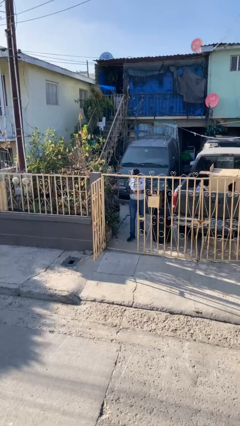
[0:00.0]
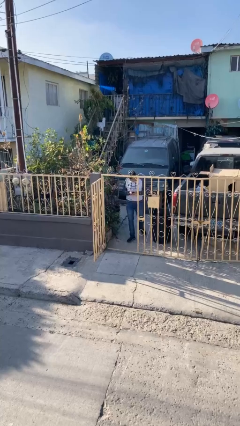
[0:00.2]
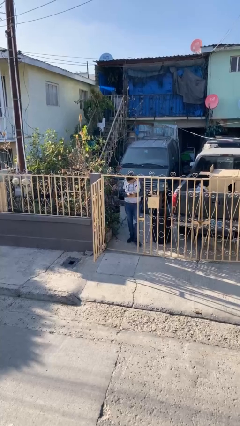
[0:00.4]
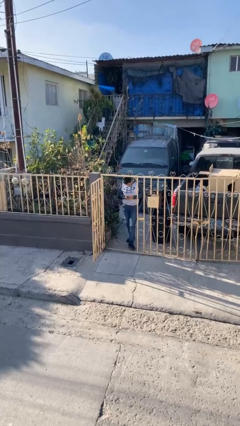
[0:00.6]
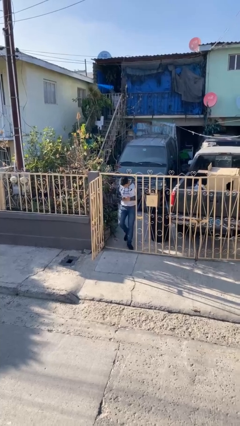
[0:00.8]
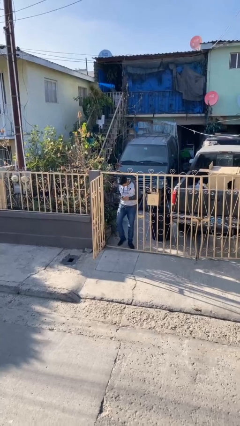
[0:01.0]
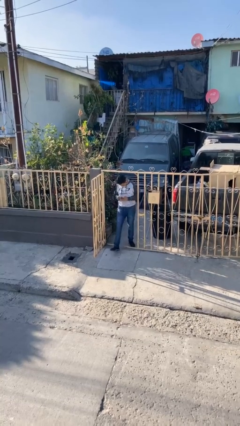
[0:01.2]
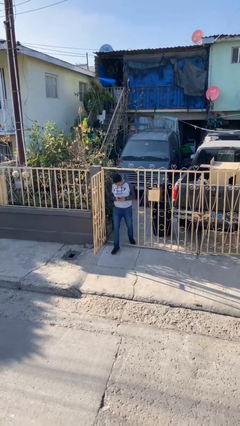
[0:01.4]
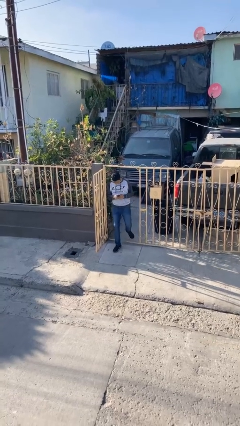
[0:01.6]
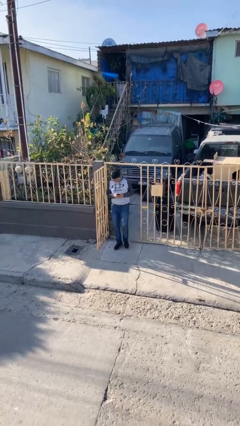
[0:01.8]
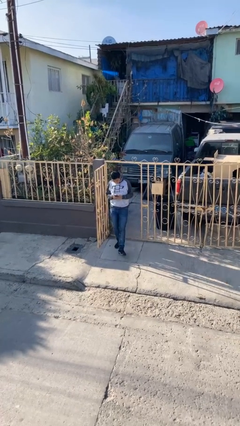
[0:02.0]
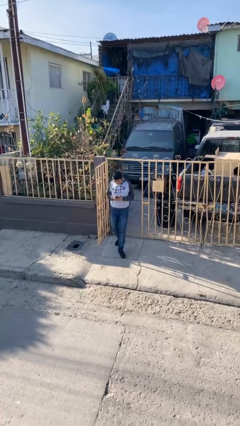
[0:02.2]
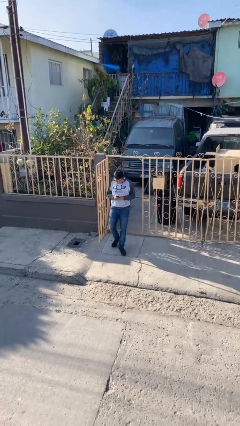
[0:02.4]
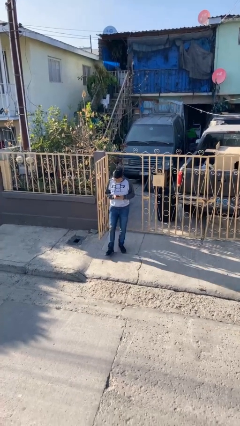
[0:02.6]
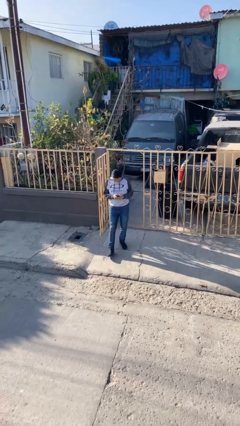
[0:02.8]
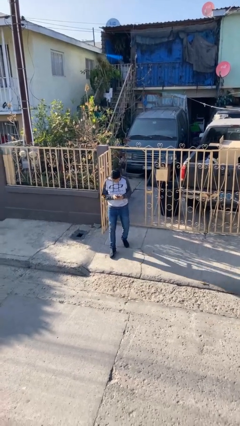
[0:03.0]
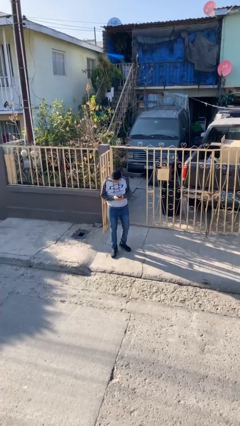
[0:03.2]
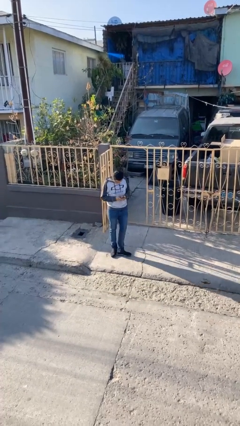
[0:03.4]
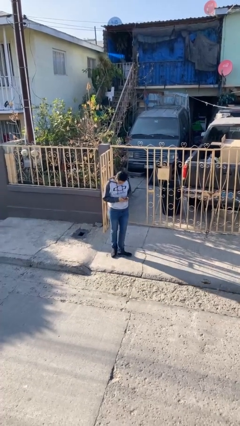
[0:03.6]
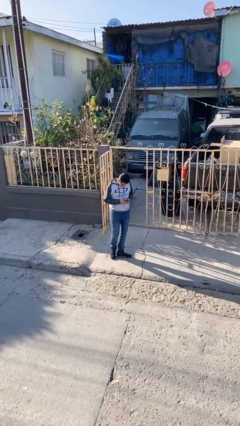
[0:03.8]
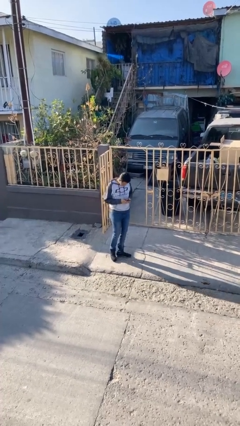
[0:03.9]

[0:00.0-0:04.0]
person enters scene through structure

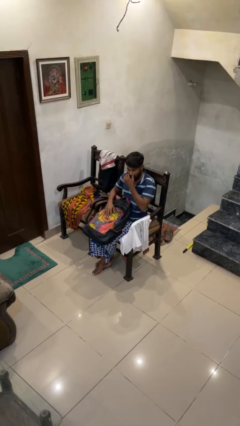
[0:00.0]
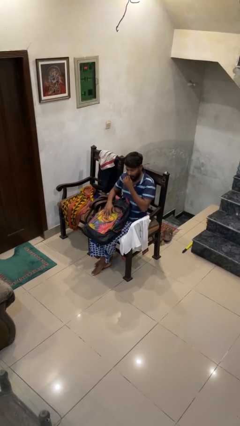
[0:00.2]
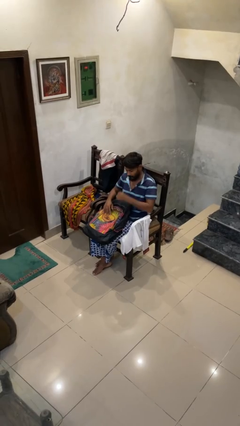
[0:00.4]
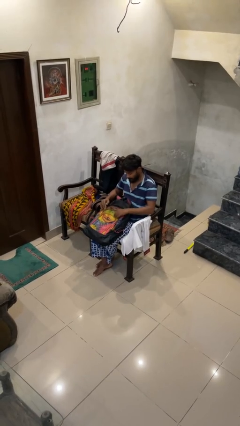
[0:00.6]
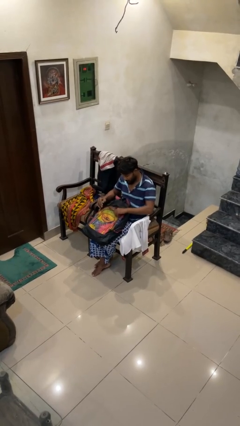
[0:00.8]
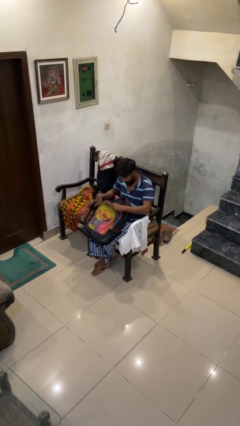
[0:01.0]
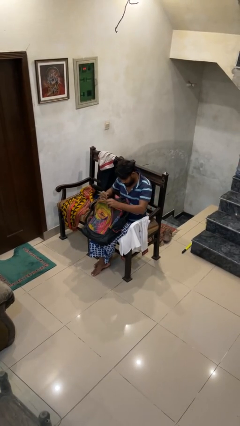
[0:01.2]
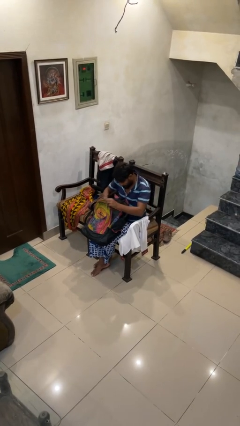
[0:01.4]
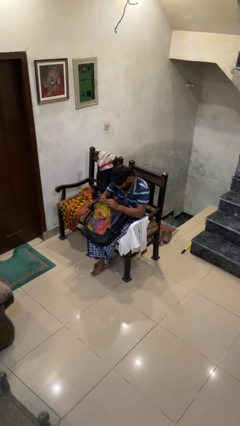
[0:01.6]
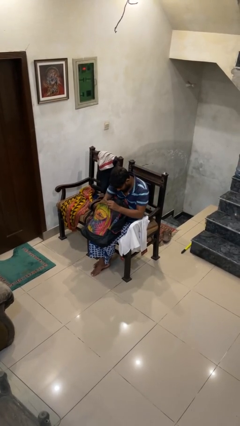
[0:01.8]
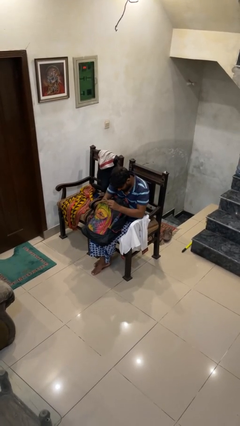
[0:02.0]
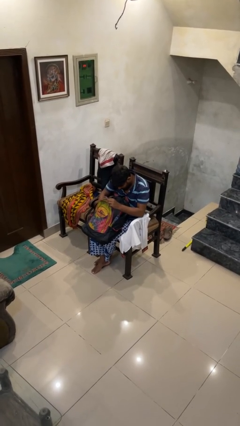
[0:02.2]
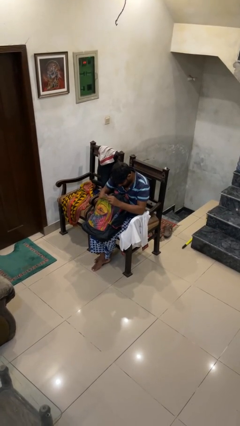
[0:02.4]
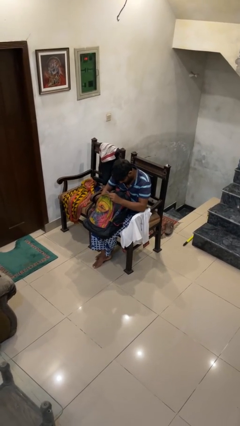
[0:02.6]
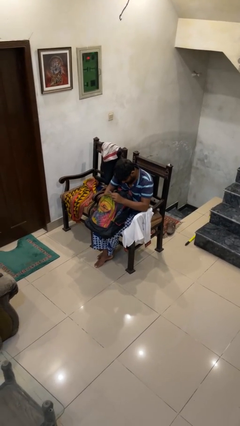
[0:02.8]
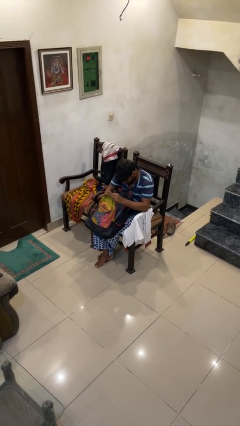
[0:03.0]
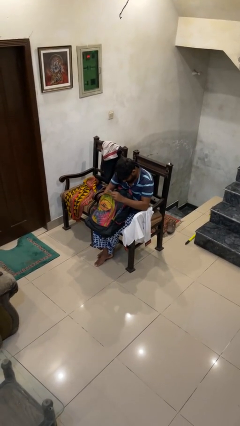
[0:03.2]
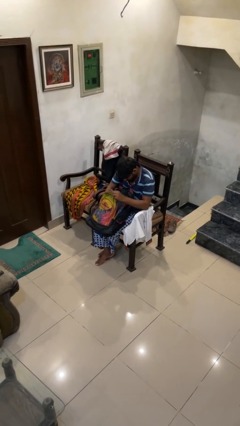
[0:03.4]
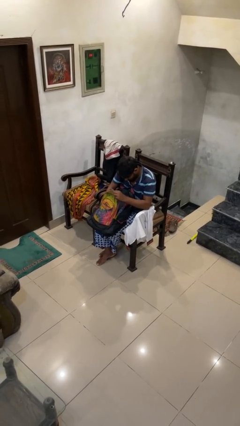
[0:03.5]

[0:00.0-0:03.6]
person searches in backpack

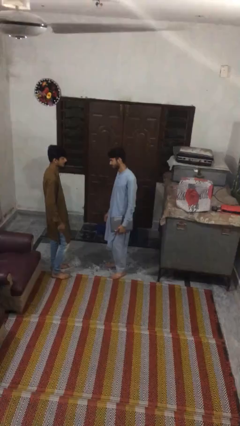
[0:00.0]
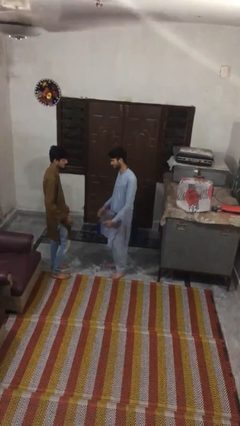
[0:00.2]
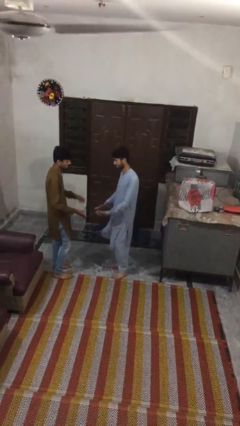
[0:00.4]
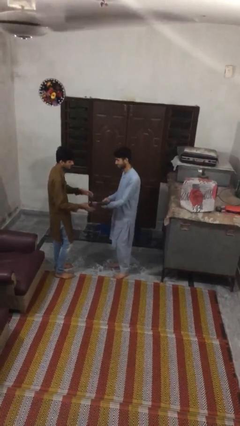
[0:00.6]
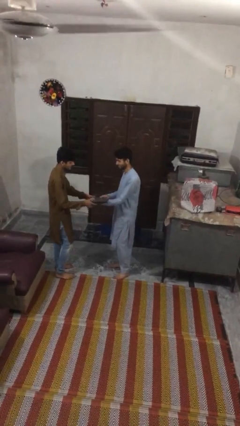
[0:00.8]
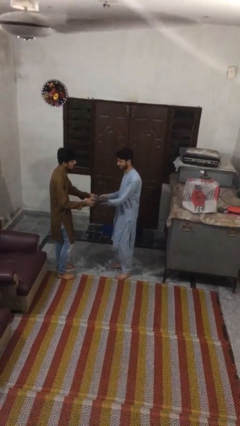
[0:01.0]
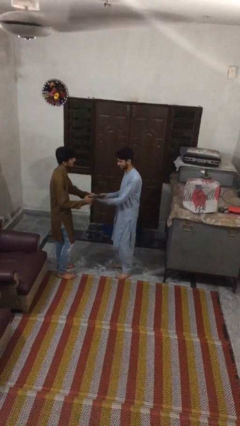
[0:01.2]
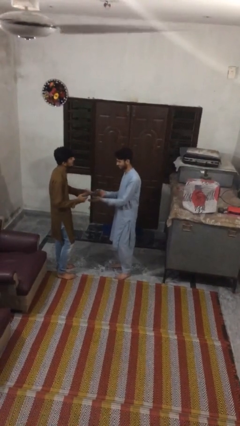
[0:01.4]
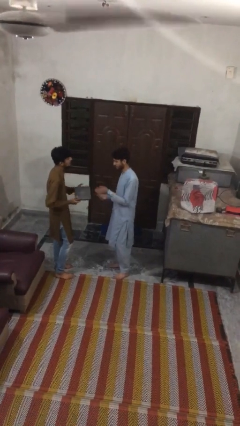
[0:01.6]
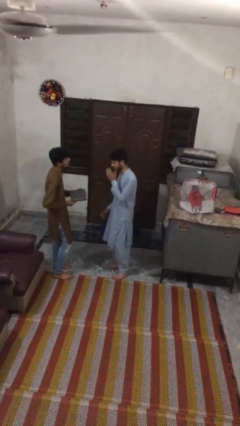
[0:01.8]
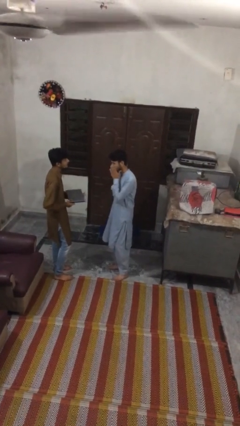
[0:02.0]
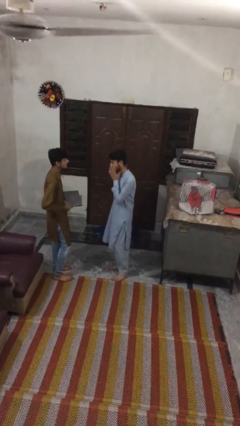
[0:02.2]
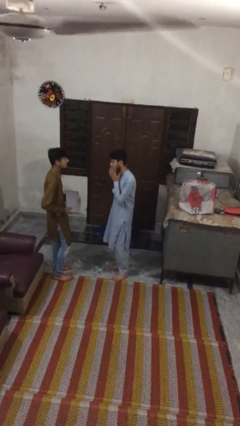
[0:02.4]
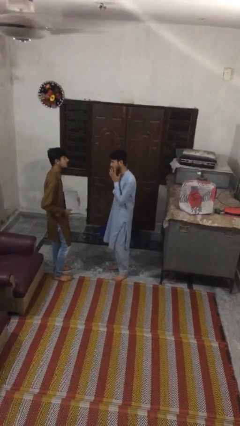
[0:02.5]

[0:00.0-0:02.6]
person transfers object to person

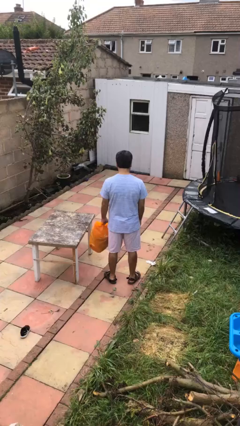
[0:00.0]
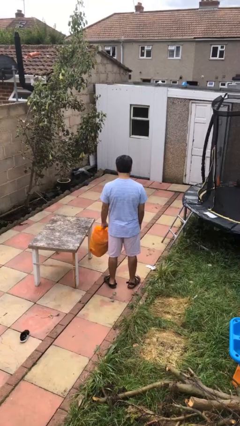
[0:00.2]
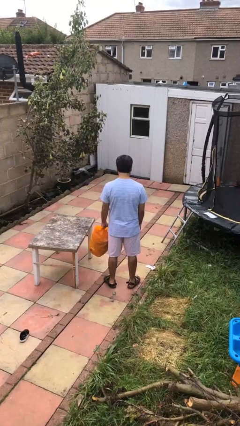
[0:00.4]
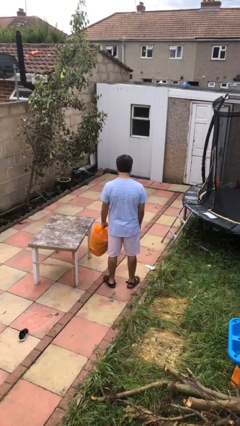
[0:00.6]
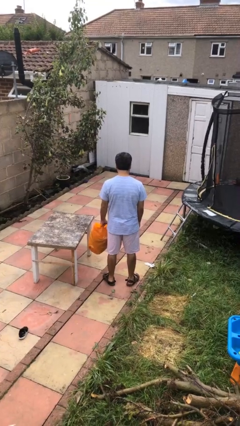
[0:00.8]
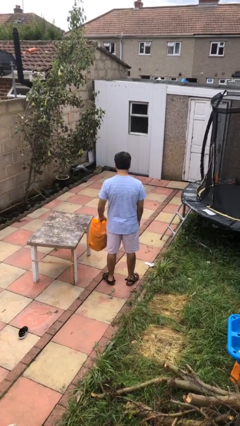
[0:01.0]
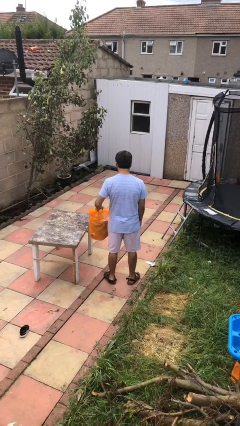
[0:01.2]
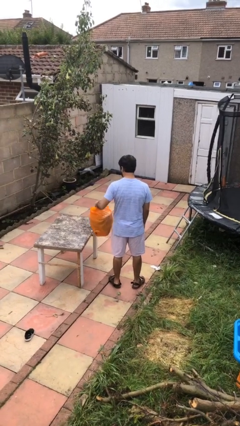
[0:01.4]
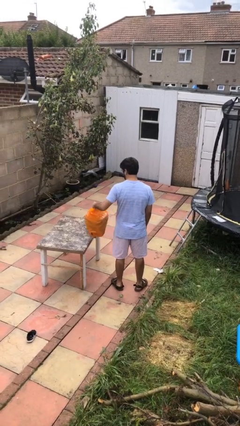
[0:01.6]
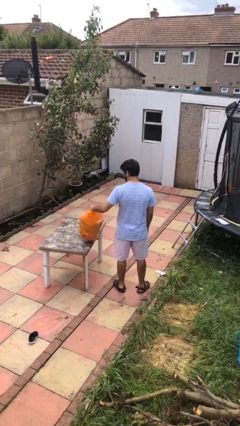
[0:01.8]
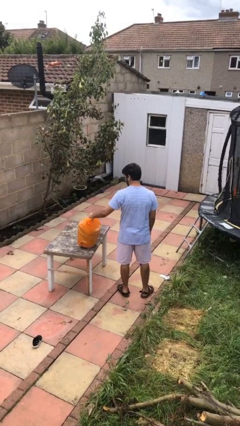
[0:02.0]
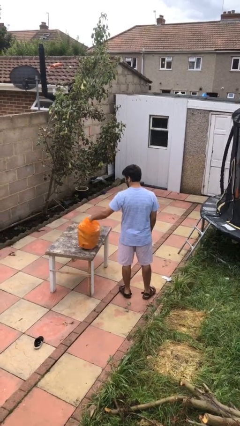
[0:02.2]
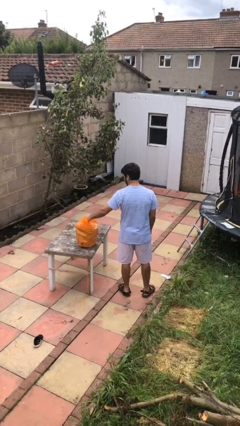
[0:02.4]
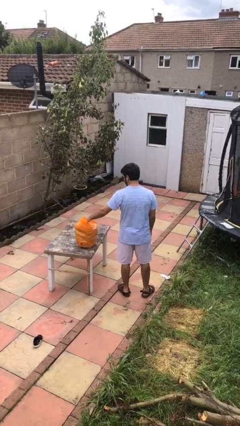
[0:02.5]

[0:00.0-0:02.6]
person puts down object on table

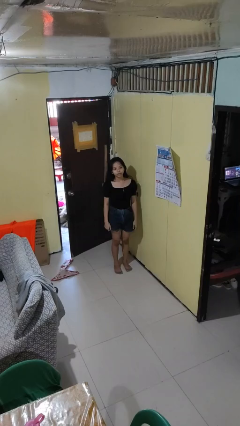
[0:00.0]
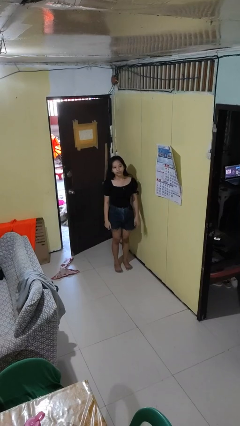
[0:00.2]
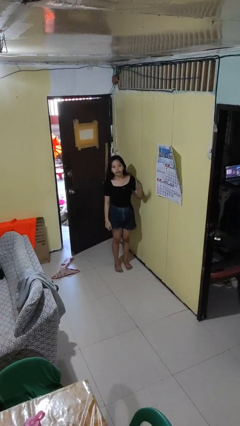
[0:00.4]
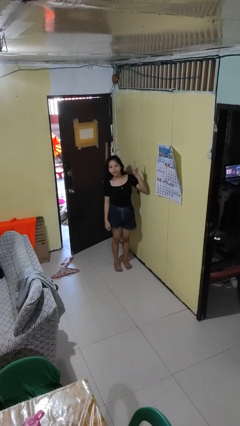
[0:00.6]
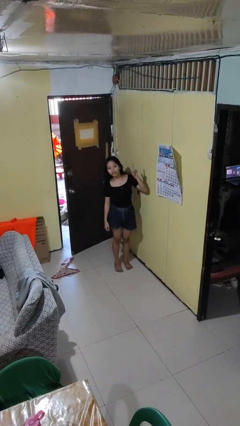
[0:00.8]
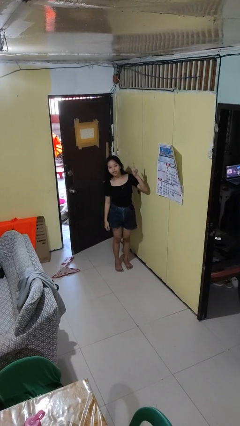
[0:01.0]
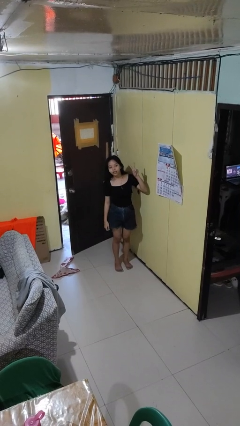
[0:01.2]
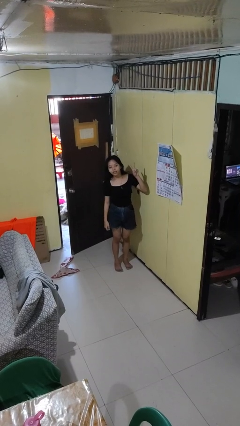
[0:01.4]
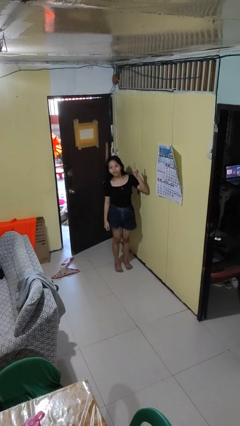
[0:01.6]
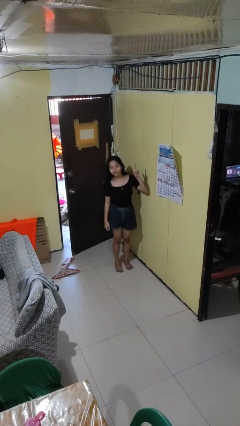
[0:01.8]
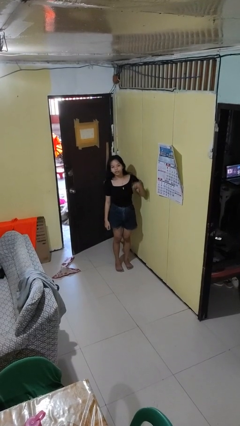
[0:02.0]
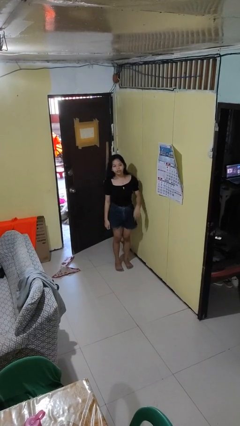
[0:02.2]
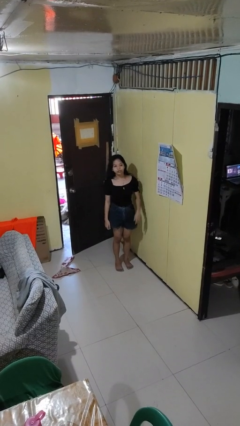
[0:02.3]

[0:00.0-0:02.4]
person gestures peace

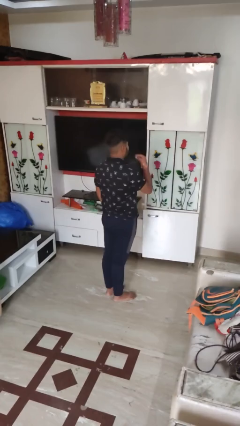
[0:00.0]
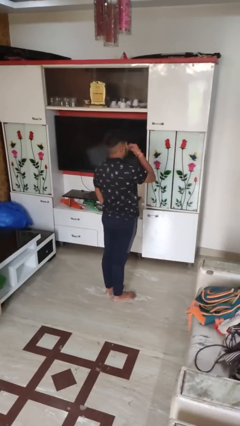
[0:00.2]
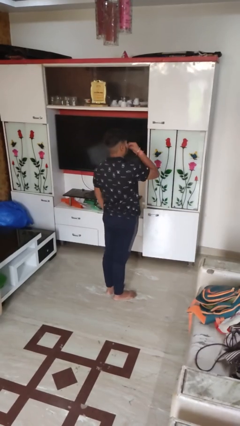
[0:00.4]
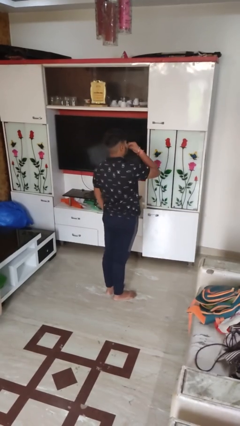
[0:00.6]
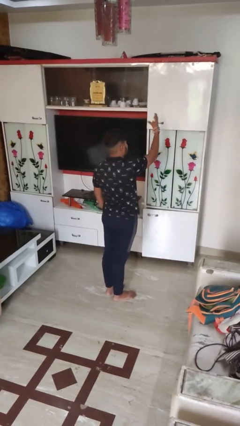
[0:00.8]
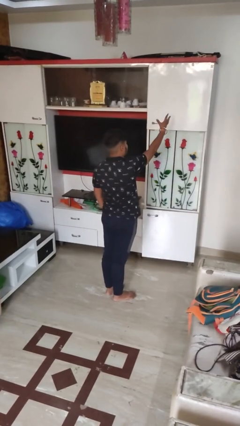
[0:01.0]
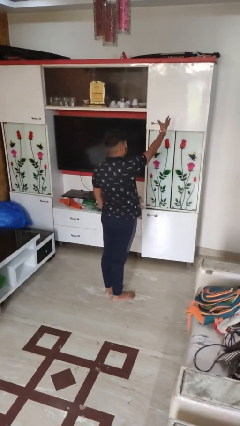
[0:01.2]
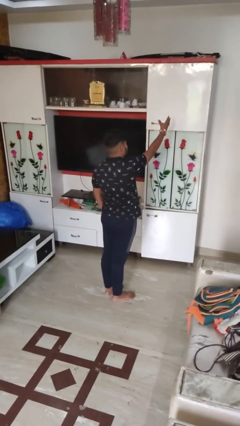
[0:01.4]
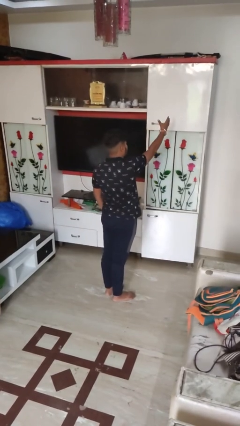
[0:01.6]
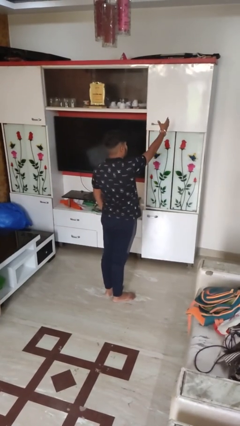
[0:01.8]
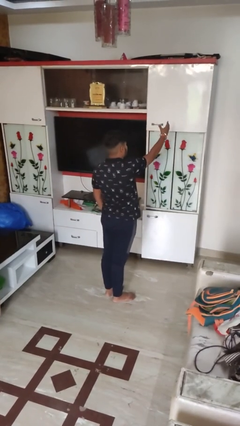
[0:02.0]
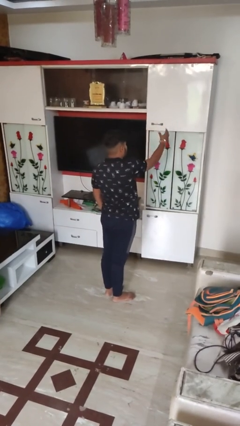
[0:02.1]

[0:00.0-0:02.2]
person gestures blow kiss

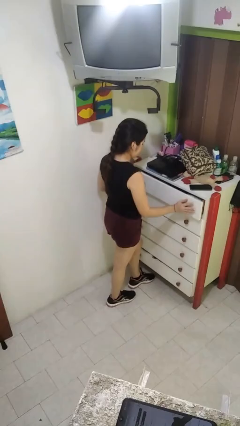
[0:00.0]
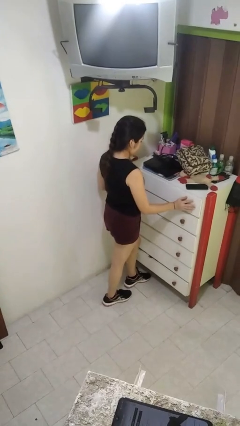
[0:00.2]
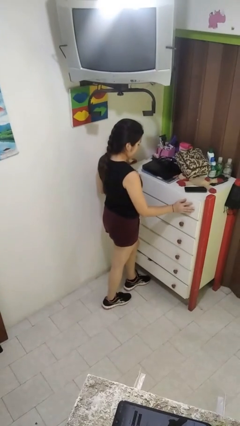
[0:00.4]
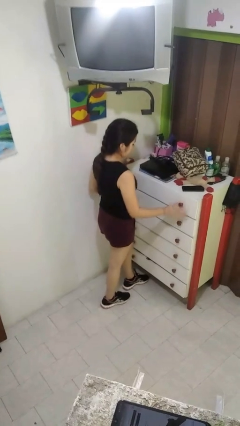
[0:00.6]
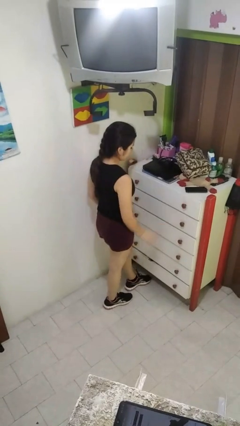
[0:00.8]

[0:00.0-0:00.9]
person closes dresser drawer
